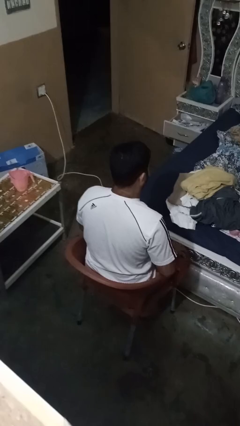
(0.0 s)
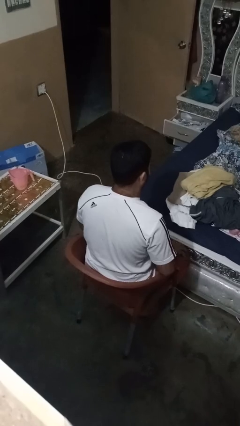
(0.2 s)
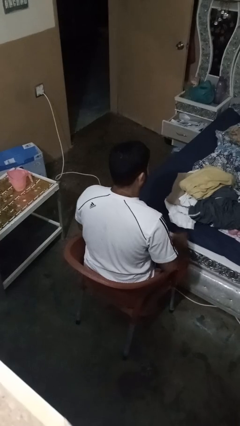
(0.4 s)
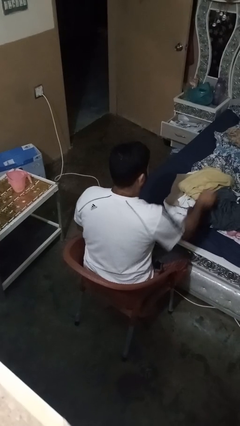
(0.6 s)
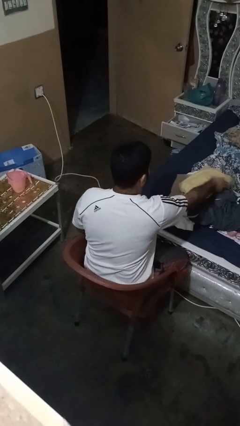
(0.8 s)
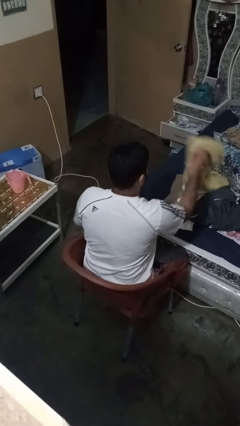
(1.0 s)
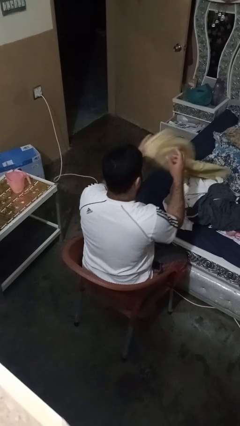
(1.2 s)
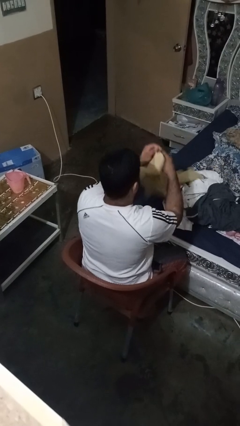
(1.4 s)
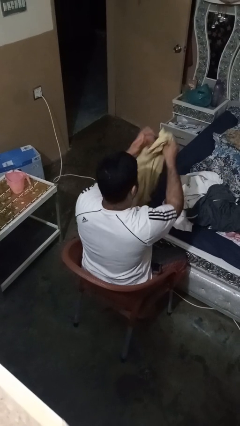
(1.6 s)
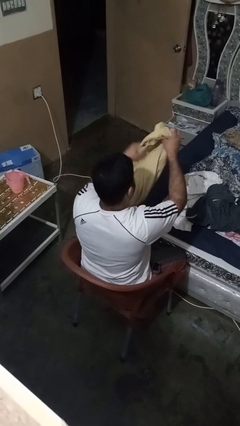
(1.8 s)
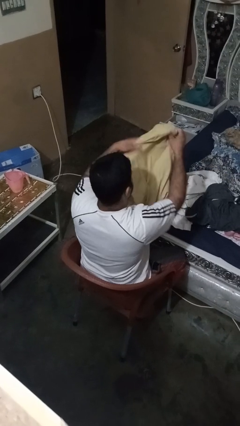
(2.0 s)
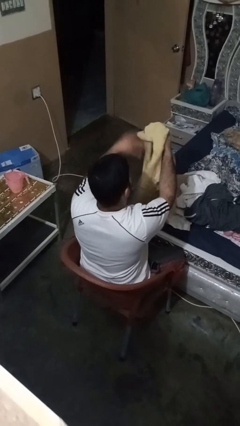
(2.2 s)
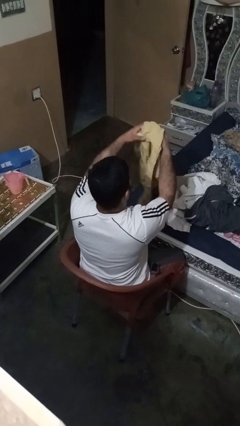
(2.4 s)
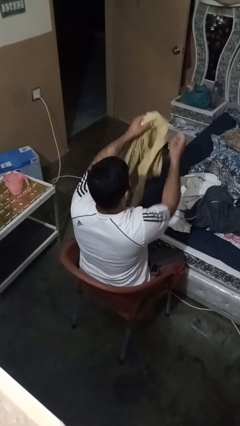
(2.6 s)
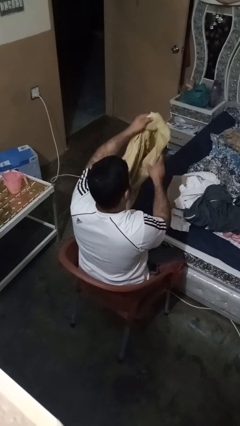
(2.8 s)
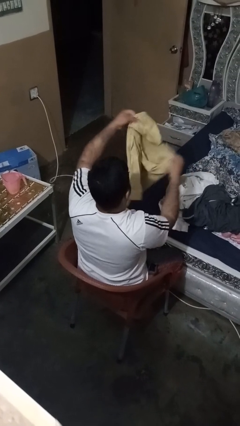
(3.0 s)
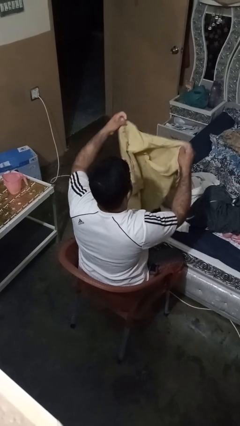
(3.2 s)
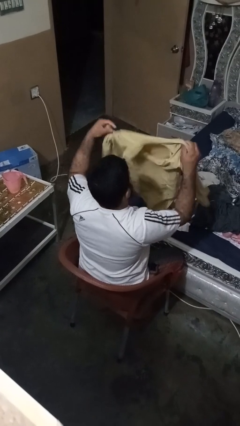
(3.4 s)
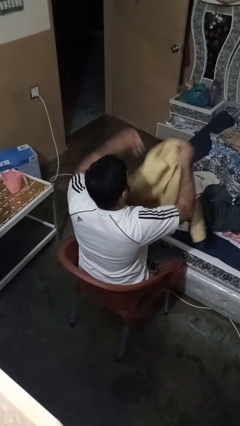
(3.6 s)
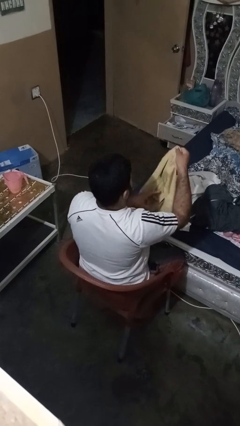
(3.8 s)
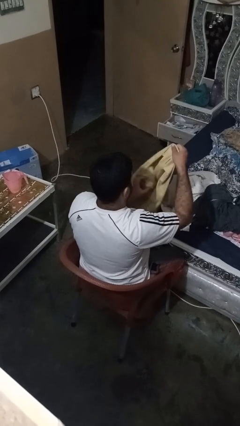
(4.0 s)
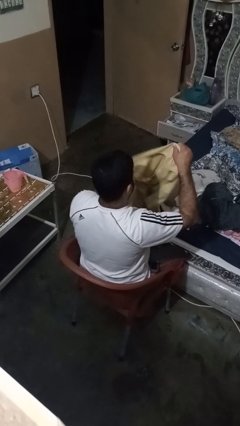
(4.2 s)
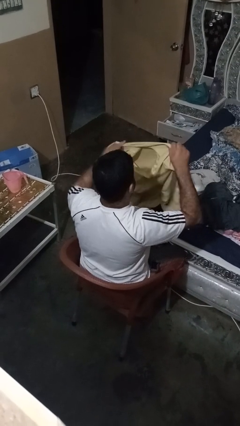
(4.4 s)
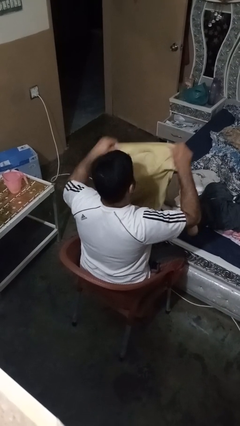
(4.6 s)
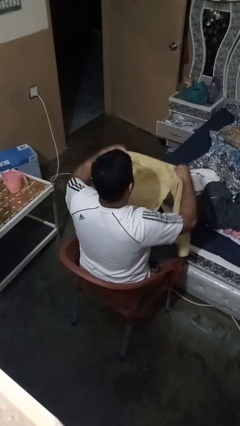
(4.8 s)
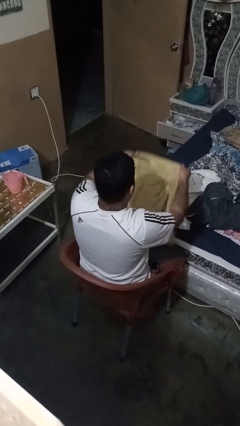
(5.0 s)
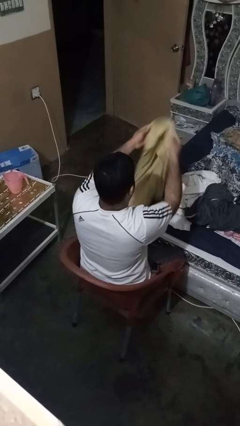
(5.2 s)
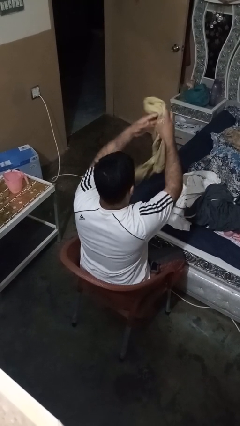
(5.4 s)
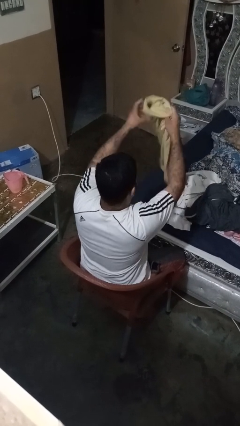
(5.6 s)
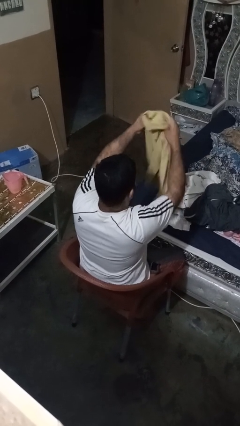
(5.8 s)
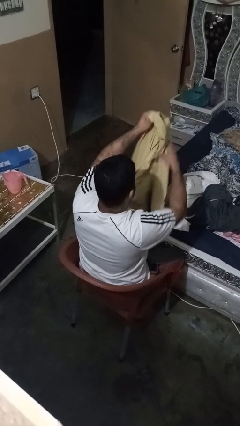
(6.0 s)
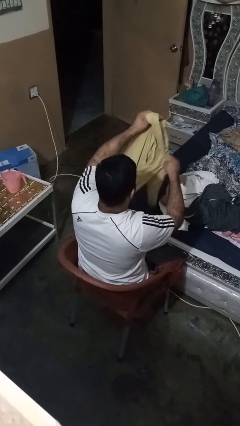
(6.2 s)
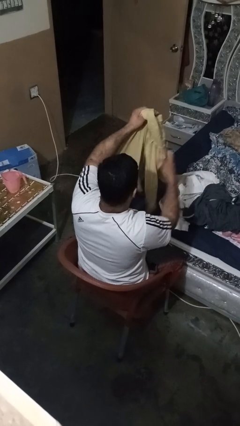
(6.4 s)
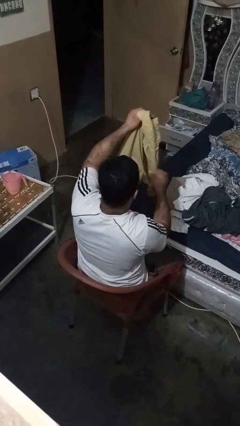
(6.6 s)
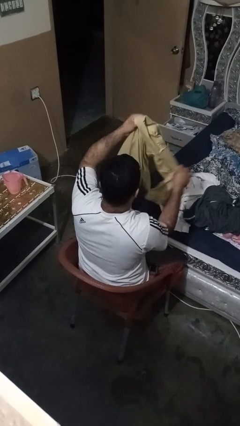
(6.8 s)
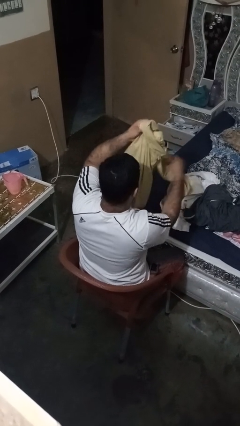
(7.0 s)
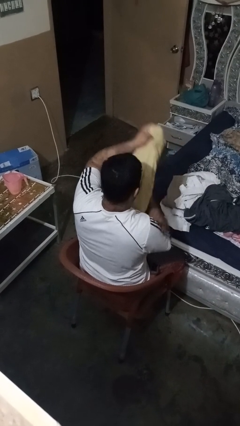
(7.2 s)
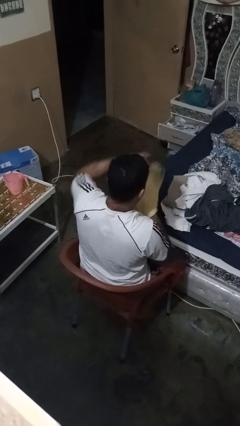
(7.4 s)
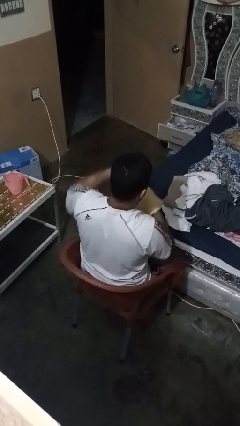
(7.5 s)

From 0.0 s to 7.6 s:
person folds shirt

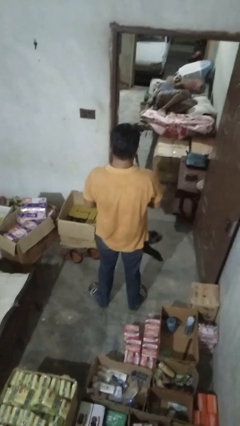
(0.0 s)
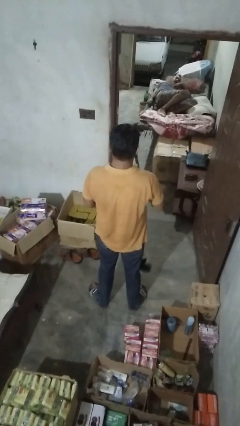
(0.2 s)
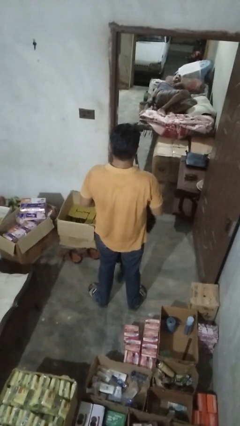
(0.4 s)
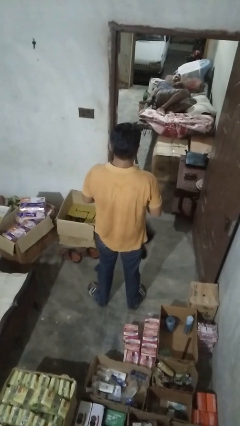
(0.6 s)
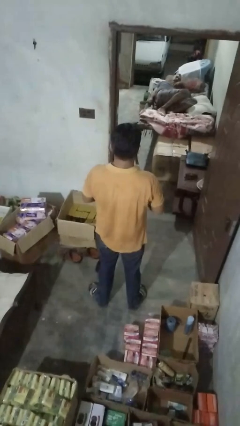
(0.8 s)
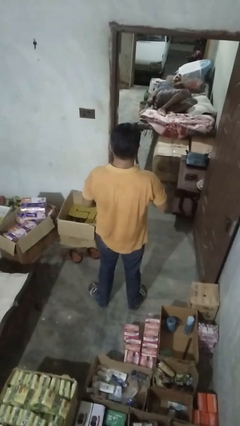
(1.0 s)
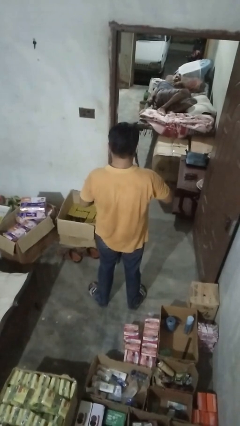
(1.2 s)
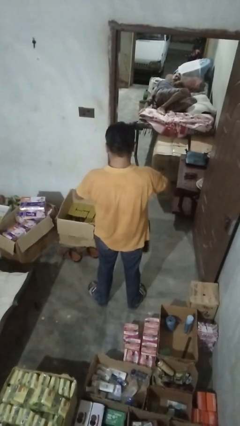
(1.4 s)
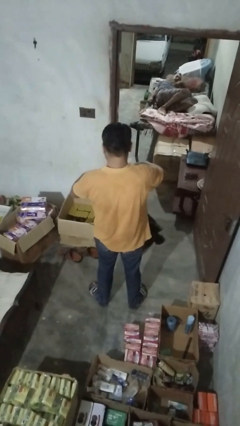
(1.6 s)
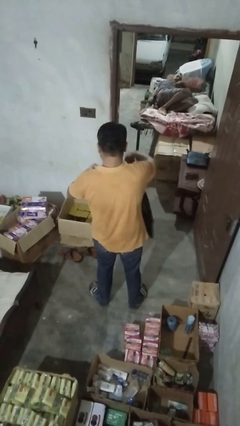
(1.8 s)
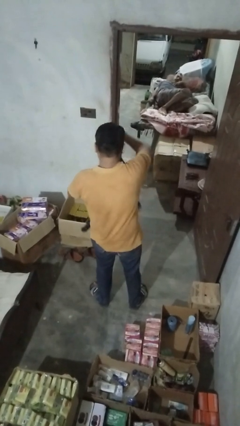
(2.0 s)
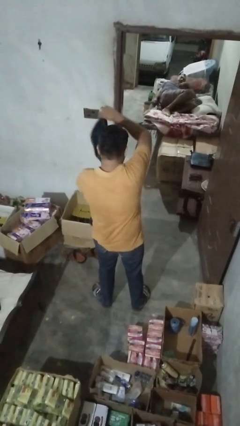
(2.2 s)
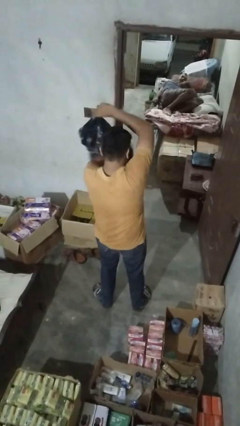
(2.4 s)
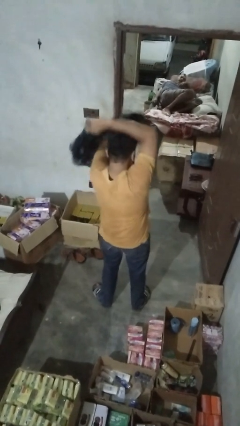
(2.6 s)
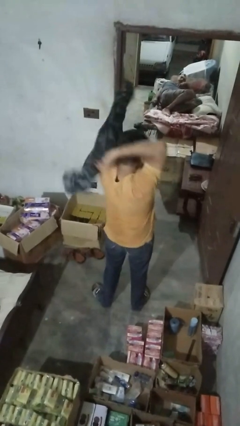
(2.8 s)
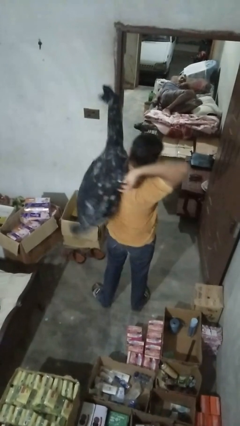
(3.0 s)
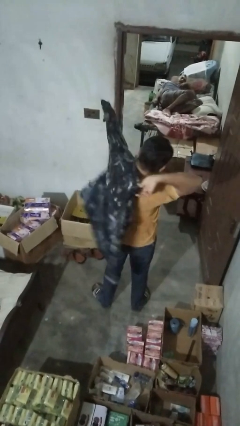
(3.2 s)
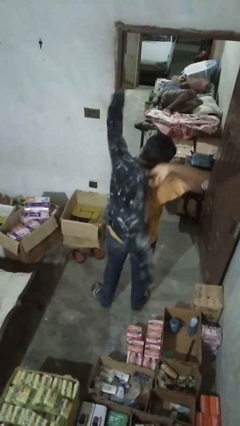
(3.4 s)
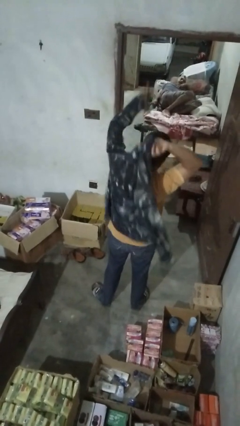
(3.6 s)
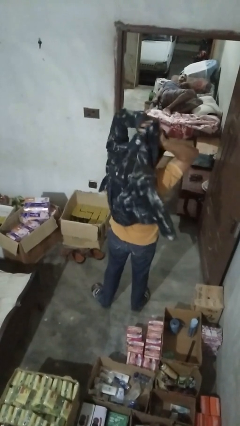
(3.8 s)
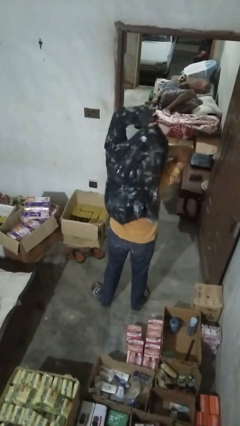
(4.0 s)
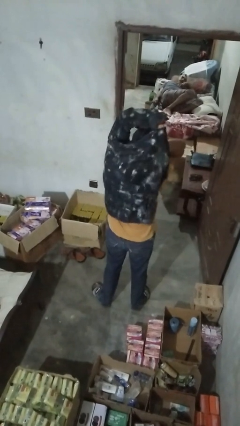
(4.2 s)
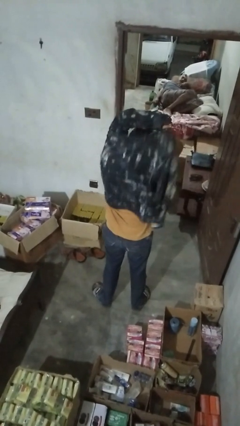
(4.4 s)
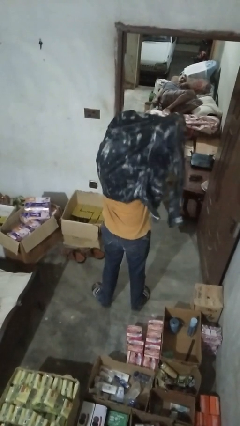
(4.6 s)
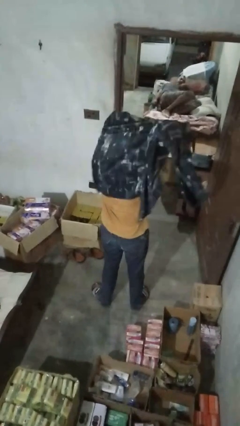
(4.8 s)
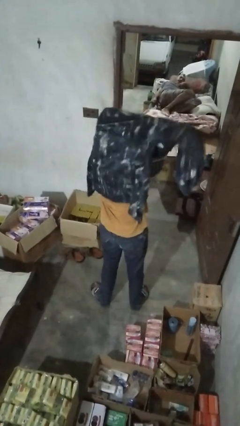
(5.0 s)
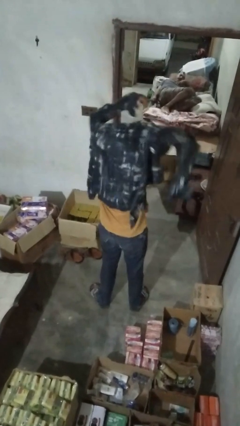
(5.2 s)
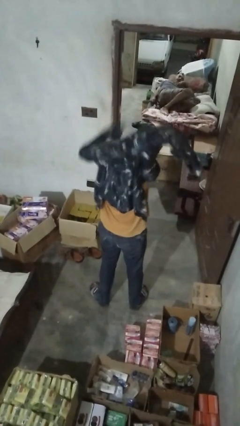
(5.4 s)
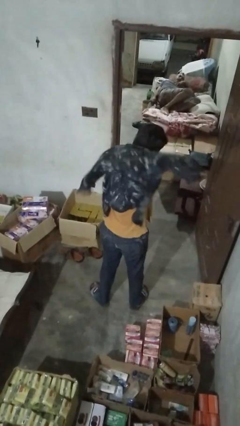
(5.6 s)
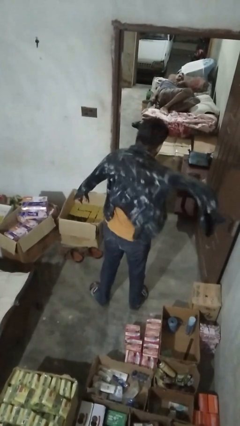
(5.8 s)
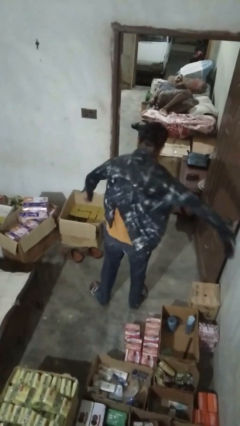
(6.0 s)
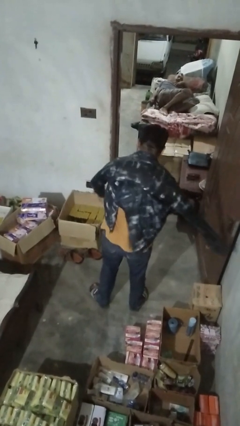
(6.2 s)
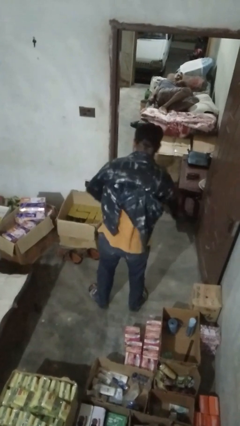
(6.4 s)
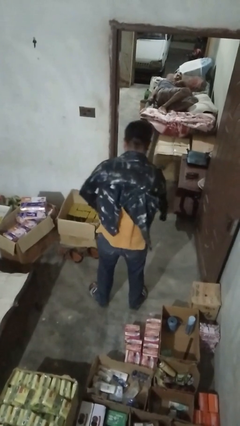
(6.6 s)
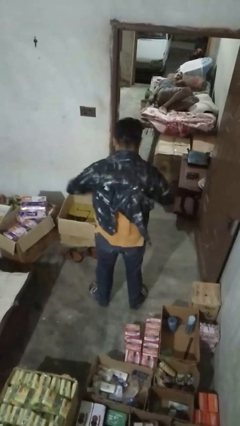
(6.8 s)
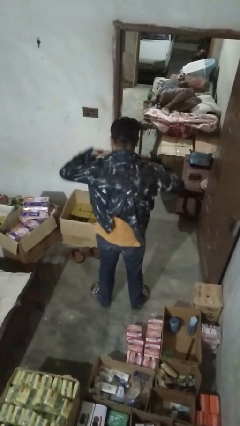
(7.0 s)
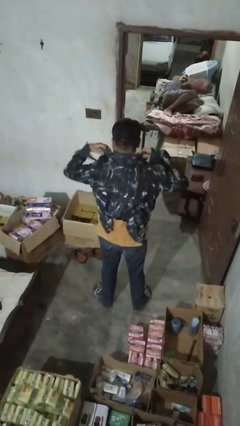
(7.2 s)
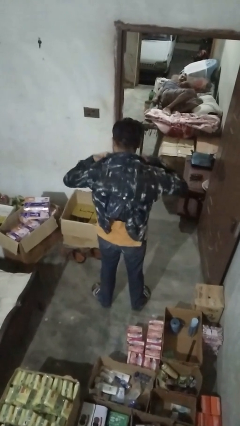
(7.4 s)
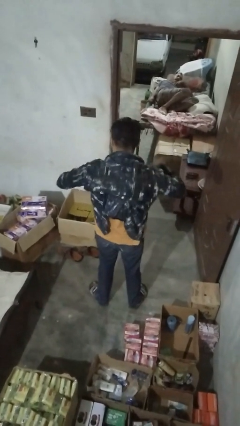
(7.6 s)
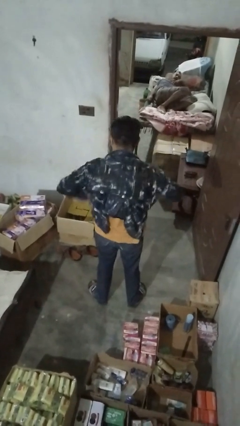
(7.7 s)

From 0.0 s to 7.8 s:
person puts on shirt

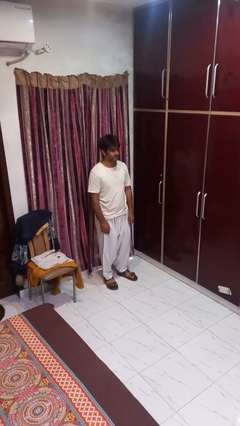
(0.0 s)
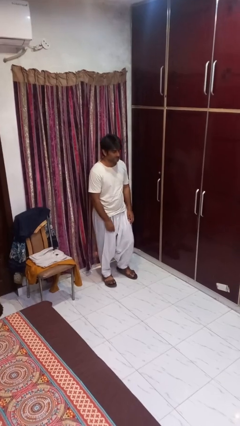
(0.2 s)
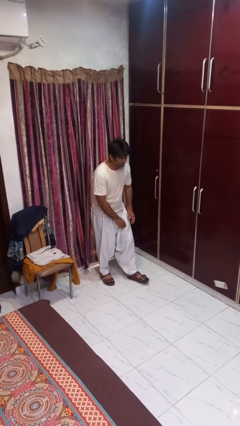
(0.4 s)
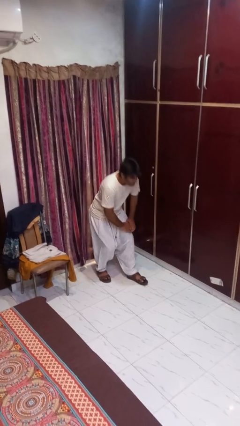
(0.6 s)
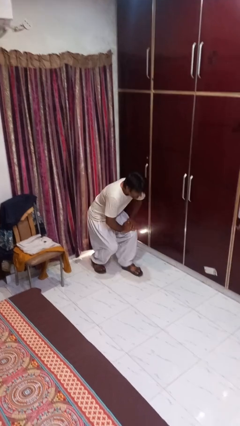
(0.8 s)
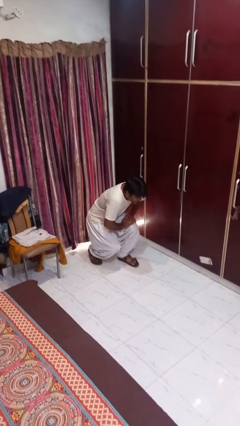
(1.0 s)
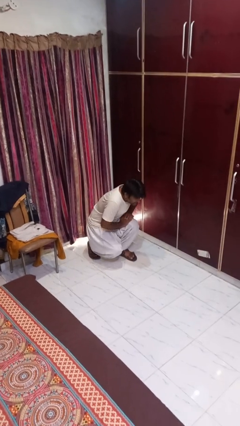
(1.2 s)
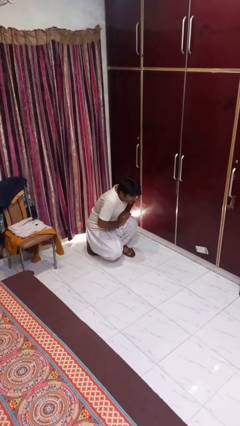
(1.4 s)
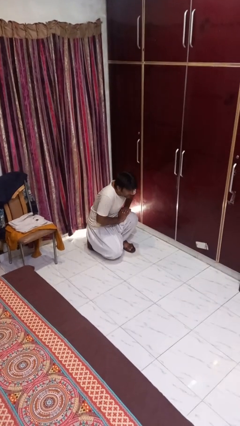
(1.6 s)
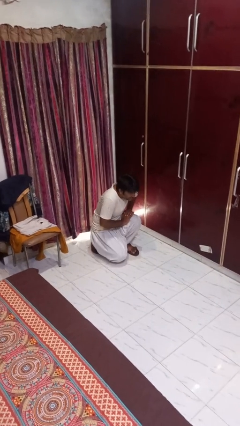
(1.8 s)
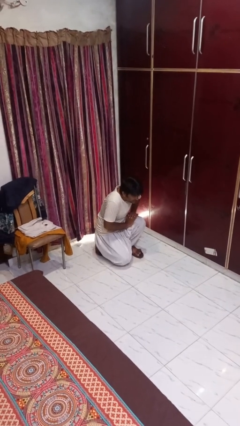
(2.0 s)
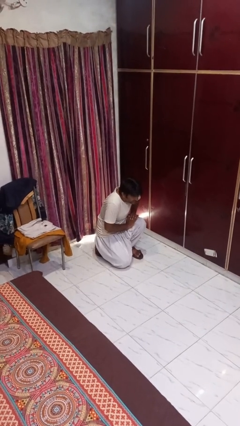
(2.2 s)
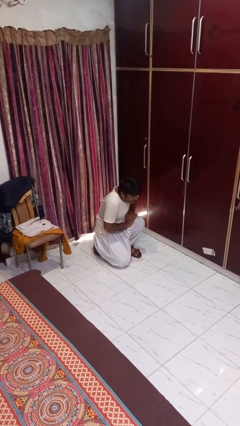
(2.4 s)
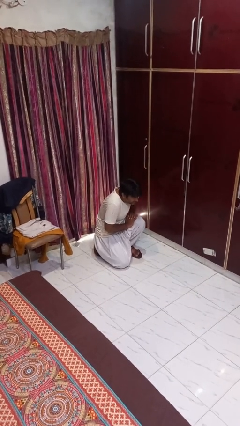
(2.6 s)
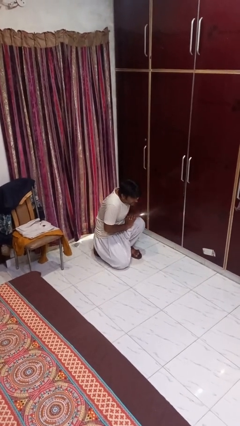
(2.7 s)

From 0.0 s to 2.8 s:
person kneels
